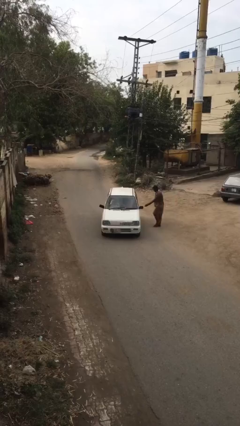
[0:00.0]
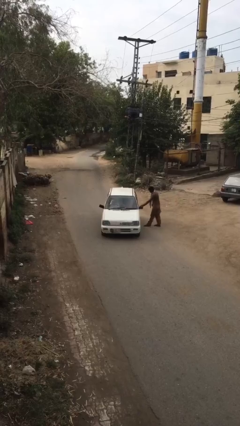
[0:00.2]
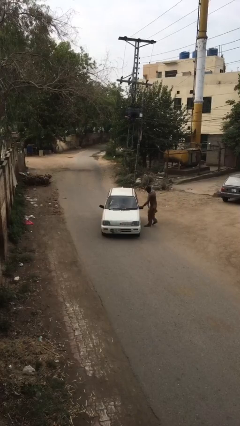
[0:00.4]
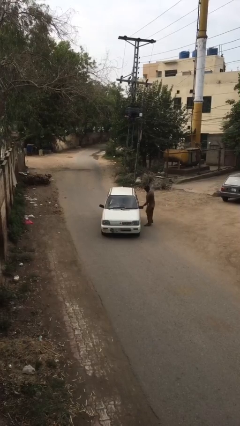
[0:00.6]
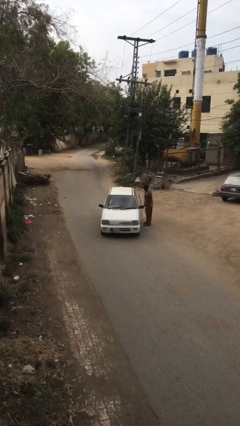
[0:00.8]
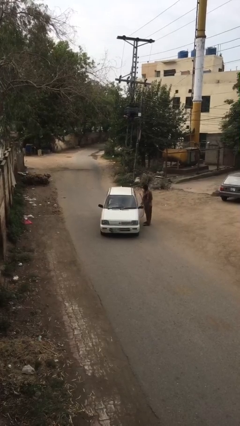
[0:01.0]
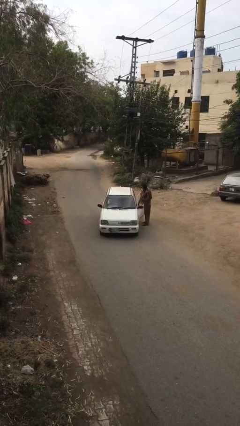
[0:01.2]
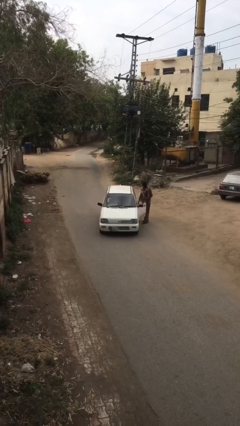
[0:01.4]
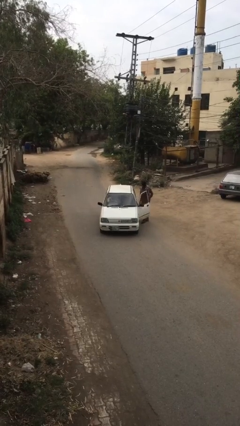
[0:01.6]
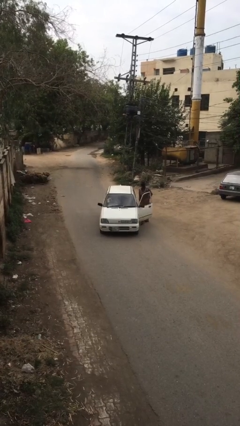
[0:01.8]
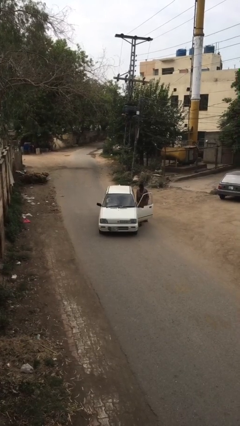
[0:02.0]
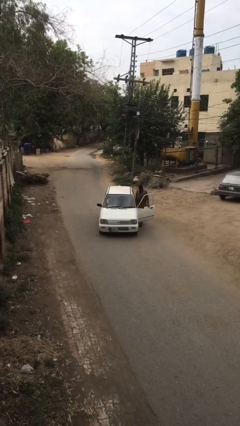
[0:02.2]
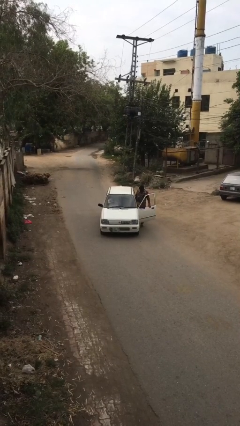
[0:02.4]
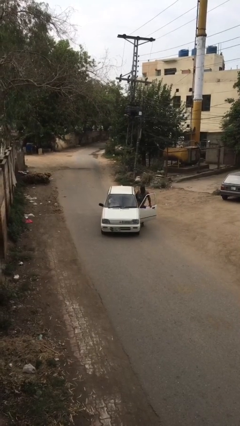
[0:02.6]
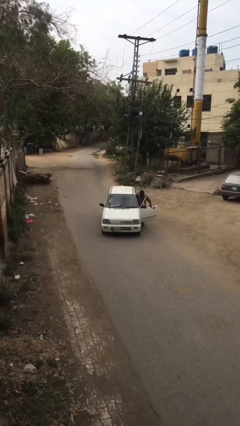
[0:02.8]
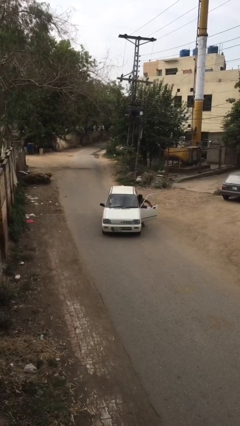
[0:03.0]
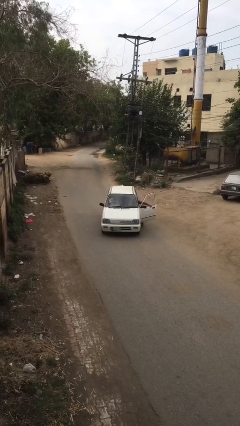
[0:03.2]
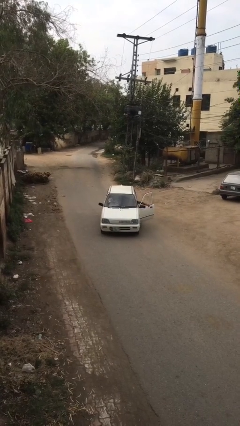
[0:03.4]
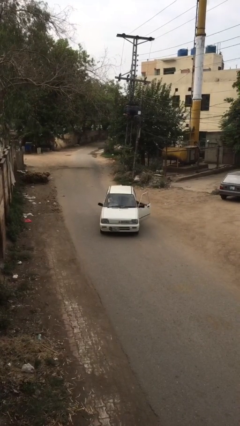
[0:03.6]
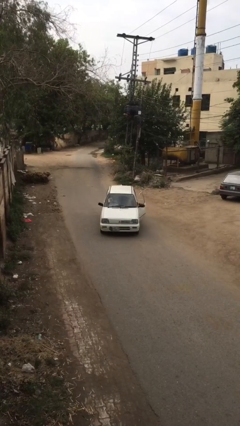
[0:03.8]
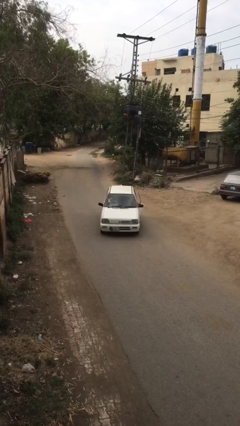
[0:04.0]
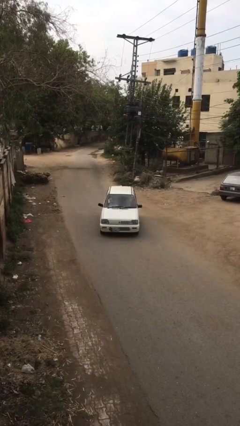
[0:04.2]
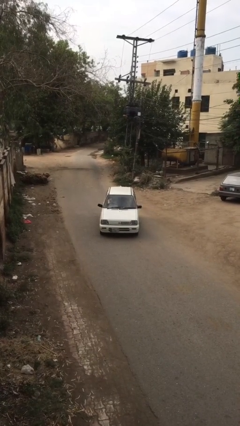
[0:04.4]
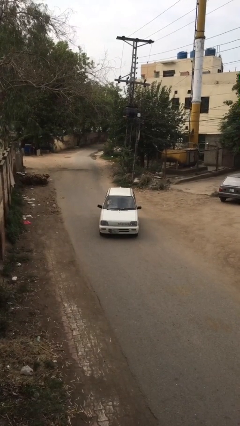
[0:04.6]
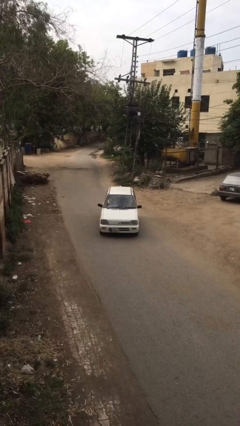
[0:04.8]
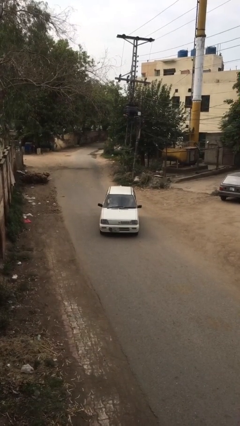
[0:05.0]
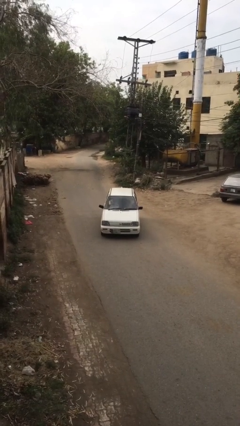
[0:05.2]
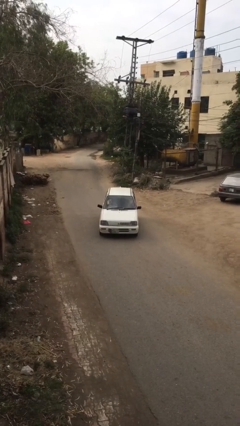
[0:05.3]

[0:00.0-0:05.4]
car picks up person

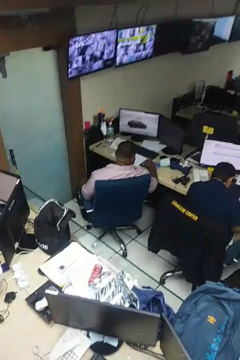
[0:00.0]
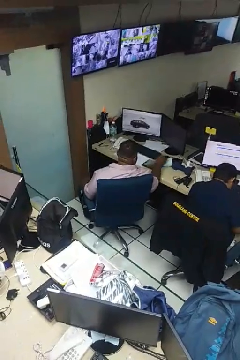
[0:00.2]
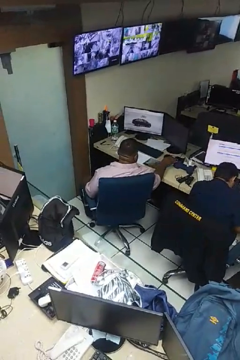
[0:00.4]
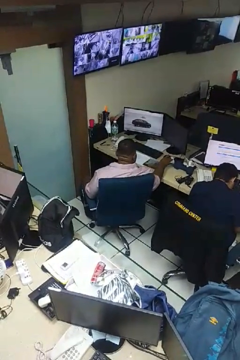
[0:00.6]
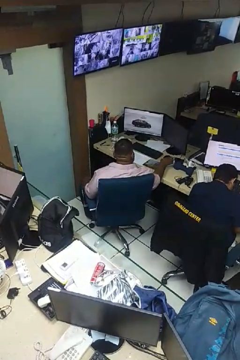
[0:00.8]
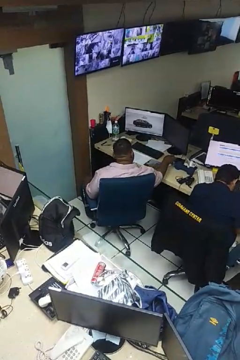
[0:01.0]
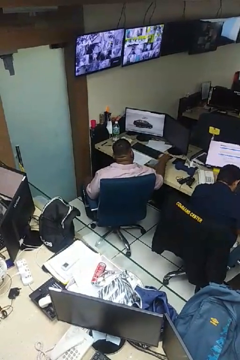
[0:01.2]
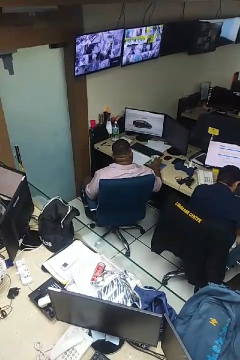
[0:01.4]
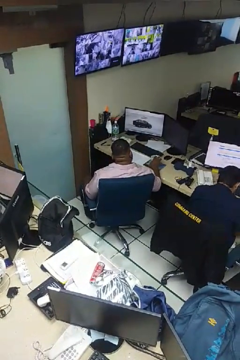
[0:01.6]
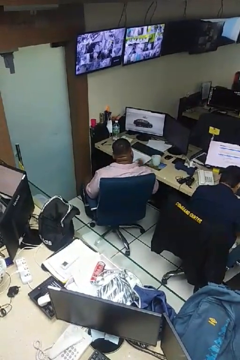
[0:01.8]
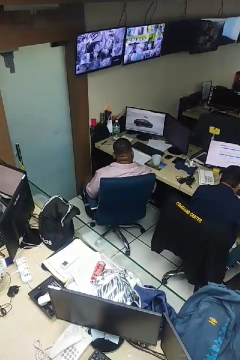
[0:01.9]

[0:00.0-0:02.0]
person sets upright glass

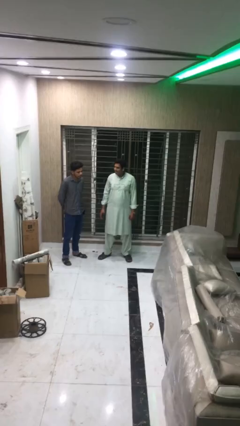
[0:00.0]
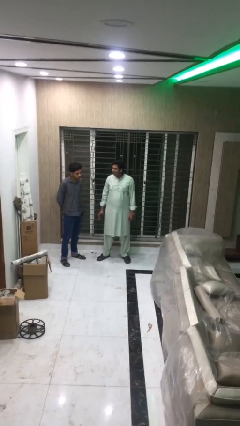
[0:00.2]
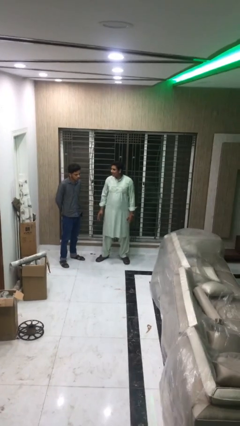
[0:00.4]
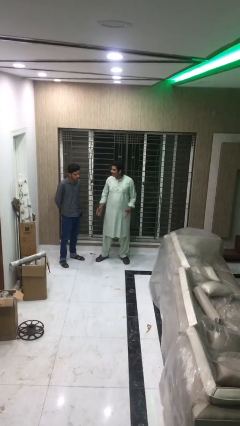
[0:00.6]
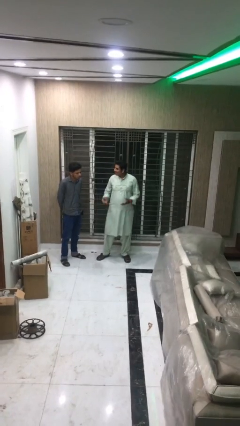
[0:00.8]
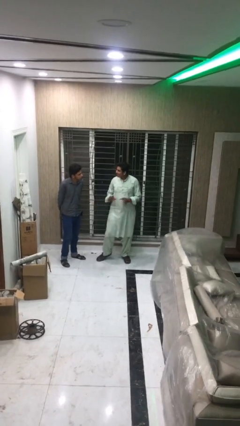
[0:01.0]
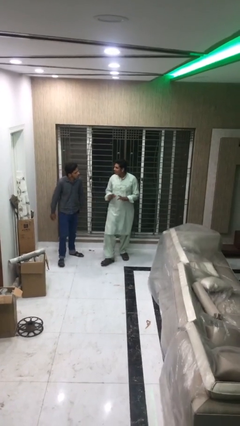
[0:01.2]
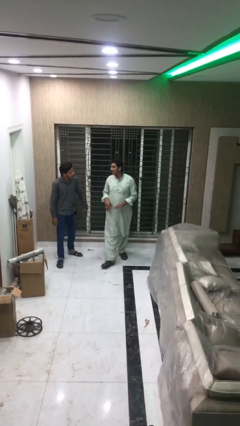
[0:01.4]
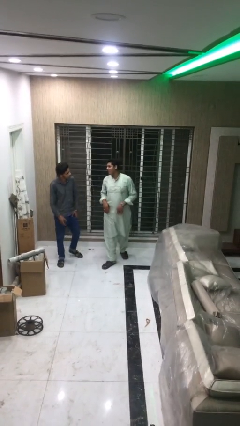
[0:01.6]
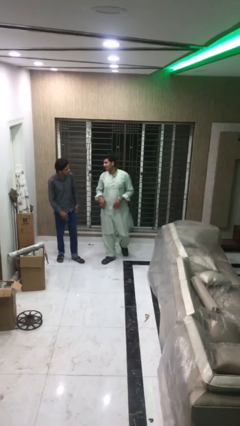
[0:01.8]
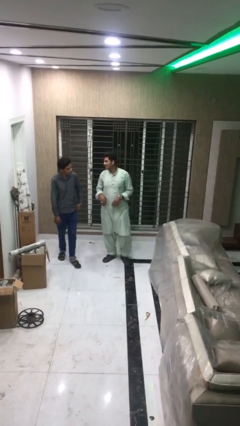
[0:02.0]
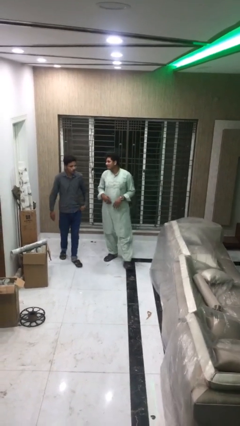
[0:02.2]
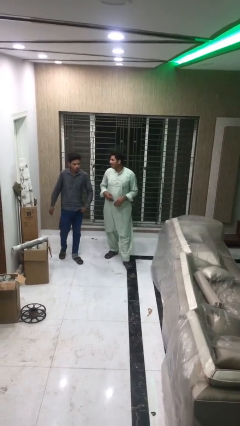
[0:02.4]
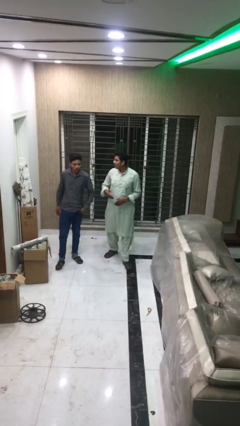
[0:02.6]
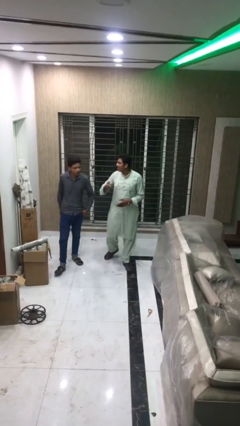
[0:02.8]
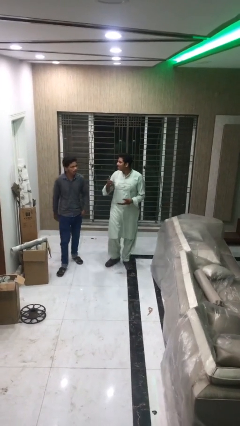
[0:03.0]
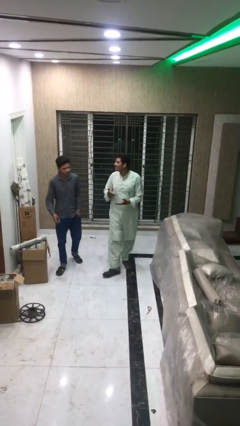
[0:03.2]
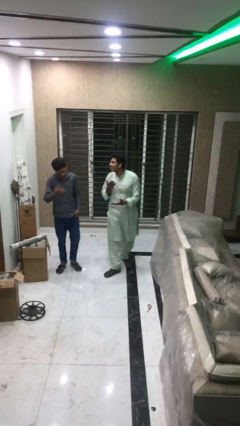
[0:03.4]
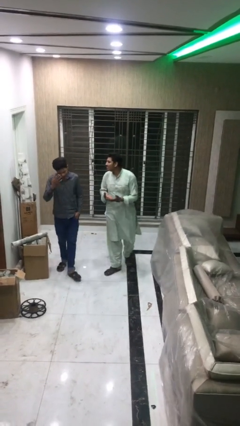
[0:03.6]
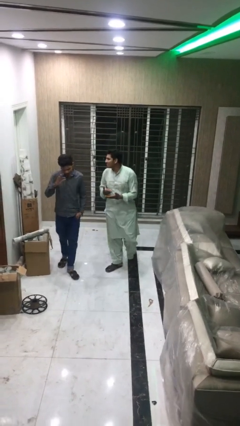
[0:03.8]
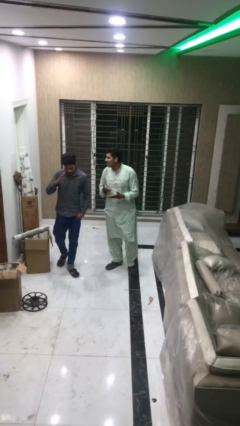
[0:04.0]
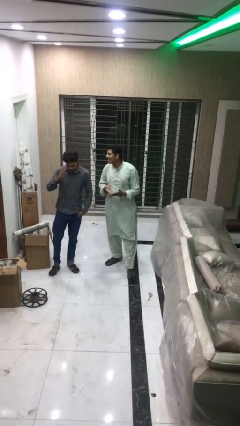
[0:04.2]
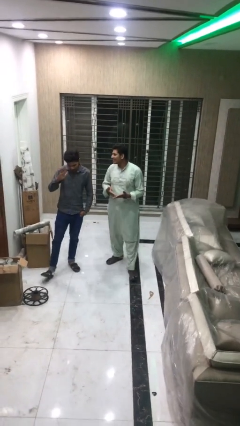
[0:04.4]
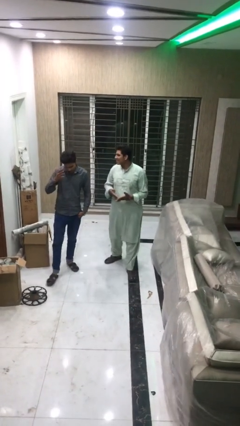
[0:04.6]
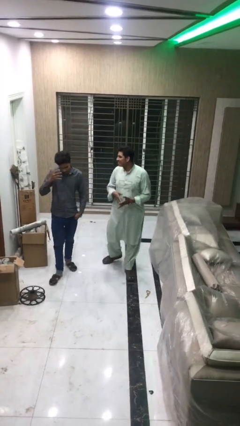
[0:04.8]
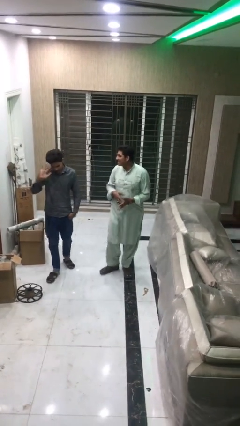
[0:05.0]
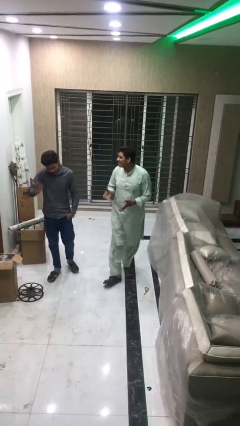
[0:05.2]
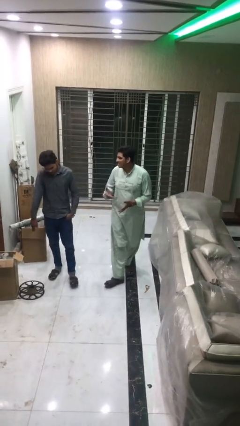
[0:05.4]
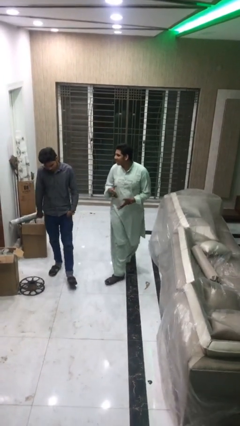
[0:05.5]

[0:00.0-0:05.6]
person talks to person

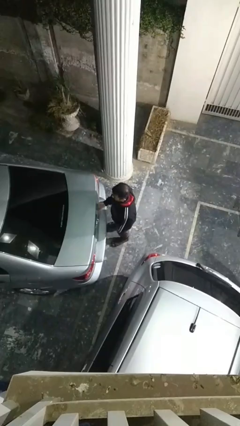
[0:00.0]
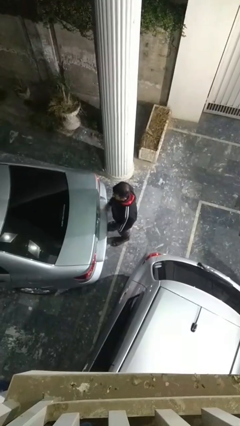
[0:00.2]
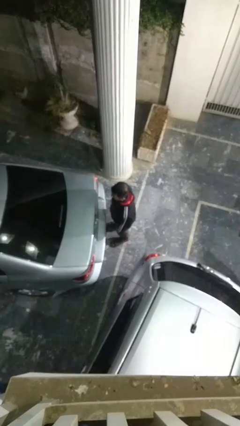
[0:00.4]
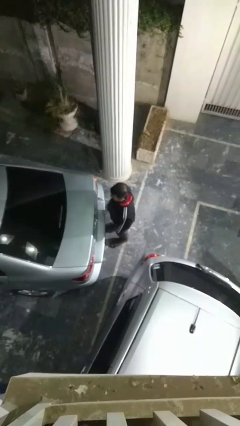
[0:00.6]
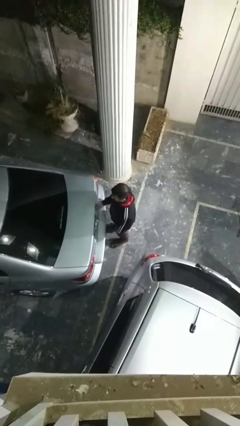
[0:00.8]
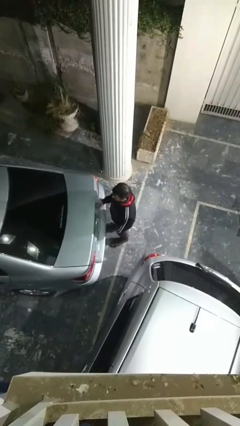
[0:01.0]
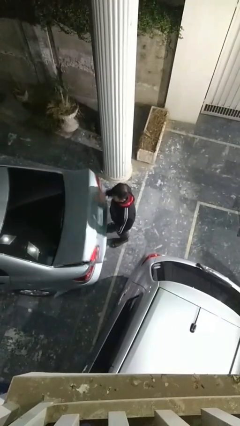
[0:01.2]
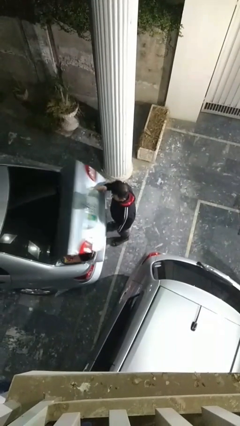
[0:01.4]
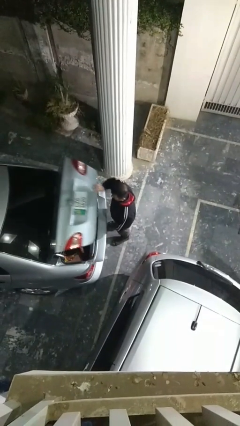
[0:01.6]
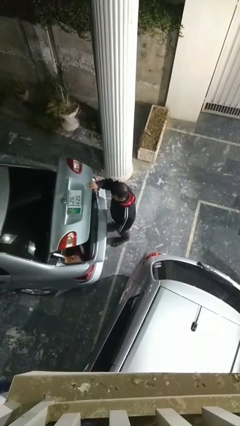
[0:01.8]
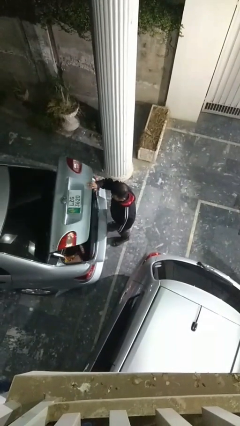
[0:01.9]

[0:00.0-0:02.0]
person opens car trunk

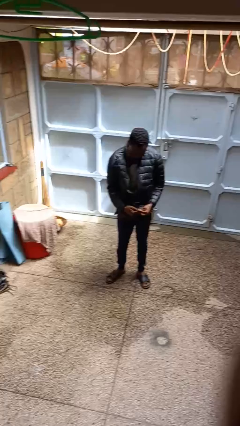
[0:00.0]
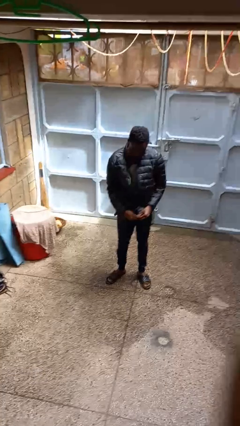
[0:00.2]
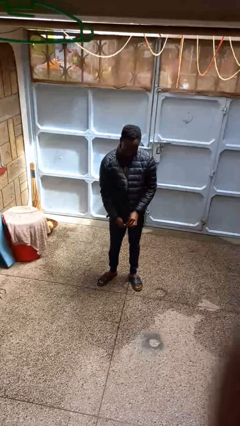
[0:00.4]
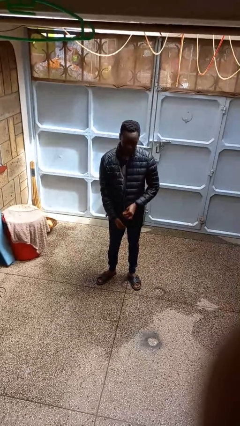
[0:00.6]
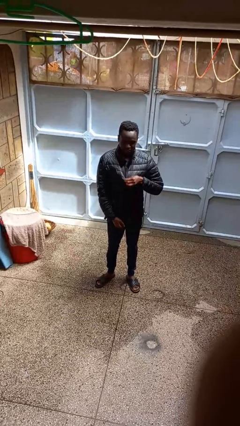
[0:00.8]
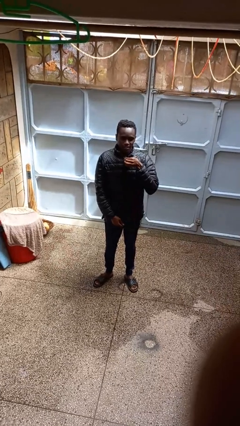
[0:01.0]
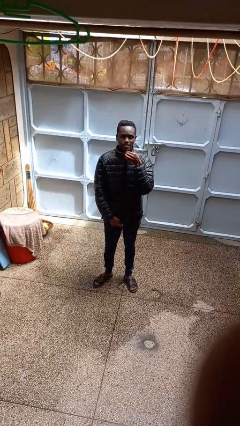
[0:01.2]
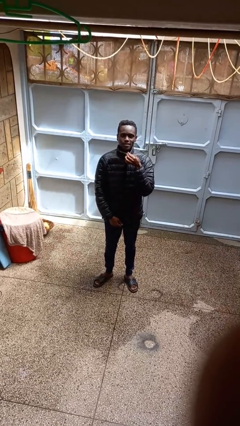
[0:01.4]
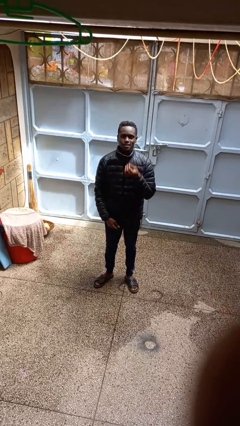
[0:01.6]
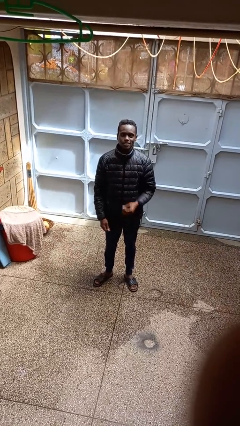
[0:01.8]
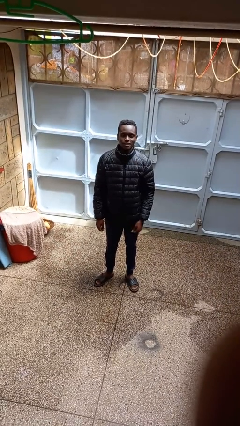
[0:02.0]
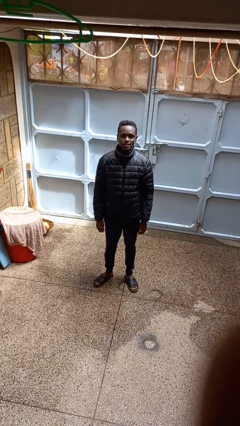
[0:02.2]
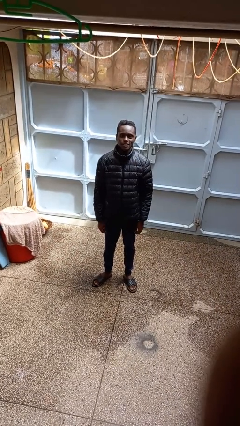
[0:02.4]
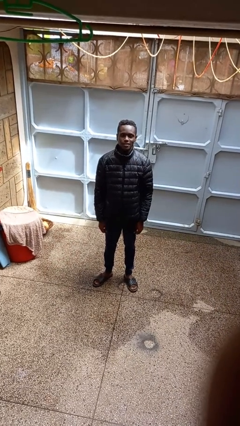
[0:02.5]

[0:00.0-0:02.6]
person zips up jacket
